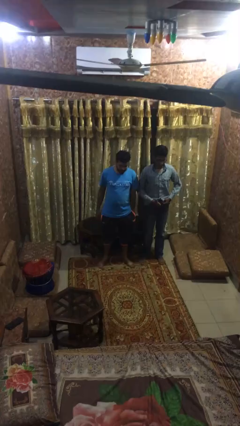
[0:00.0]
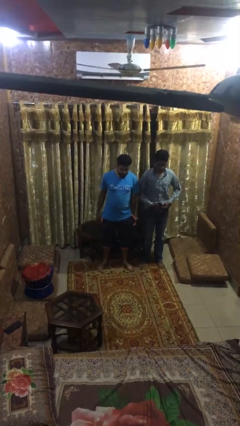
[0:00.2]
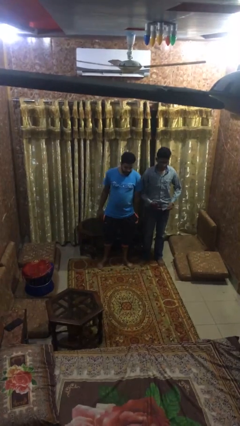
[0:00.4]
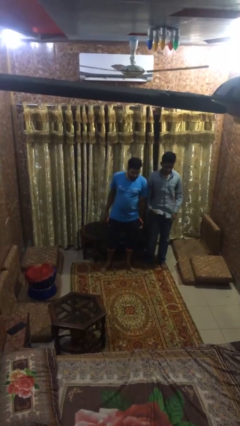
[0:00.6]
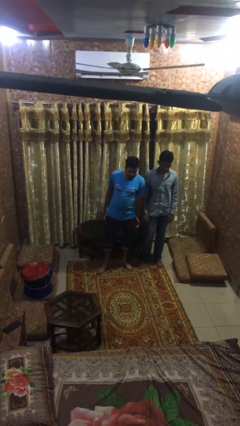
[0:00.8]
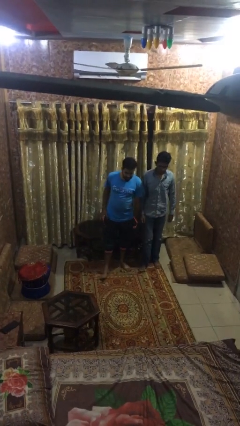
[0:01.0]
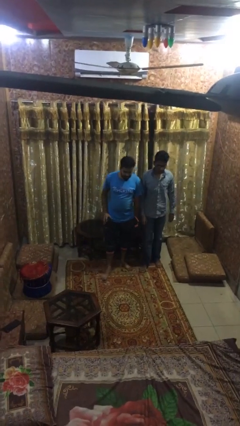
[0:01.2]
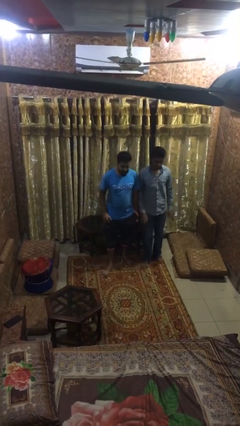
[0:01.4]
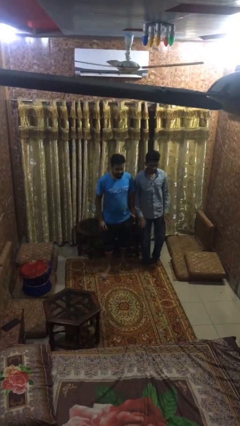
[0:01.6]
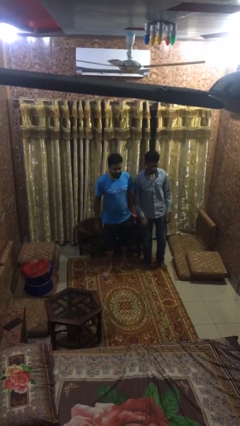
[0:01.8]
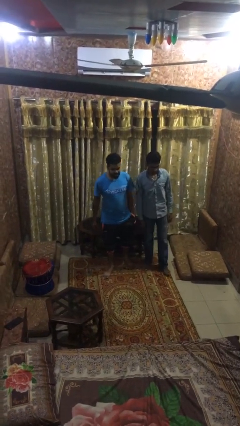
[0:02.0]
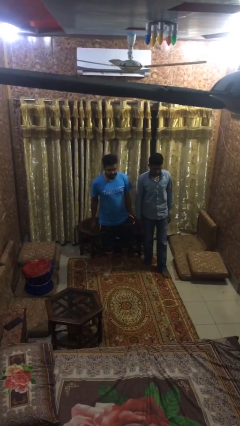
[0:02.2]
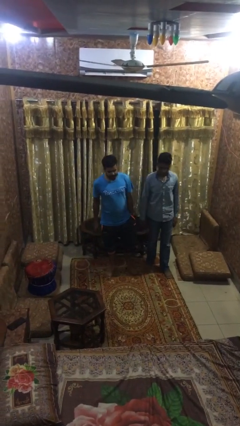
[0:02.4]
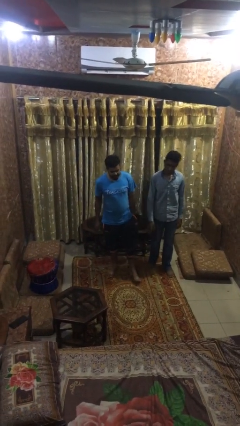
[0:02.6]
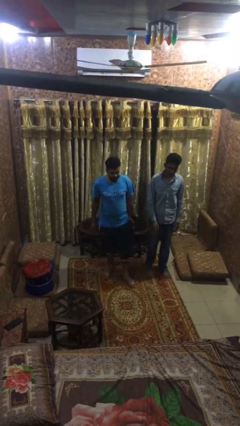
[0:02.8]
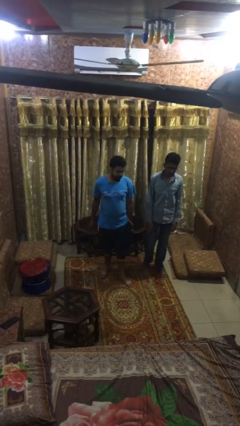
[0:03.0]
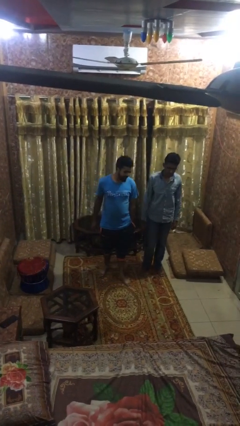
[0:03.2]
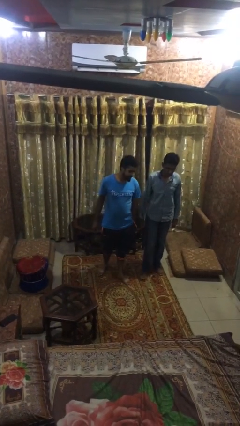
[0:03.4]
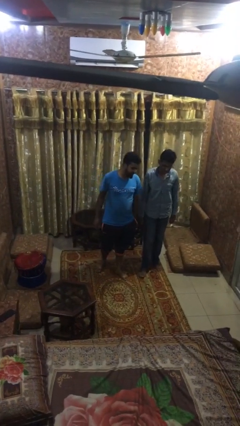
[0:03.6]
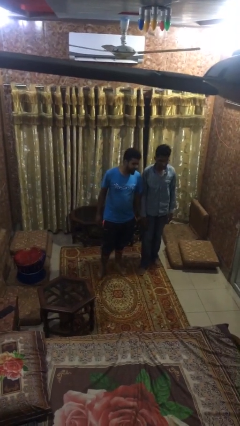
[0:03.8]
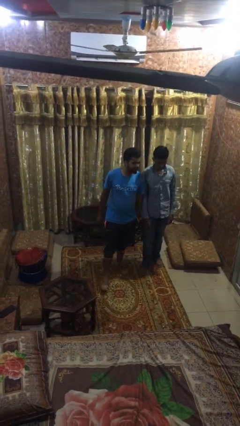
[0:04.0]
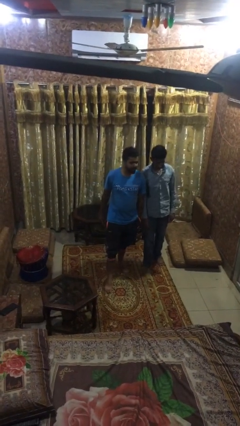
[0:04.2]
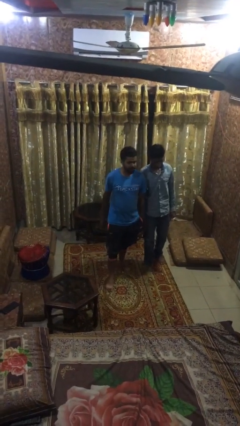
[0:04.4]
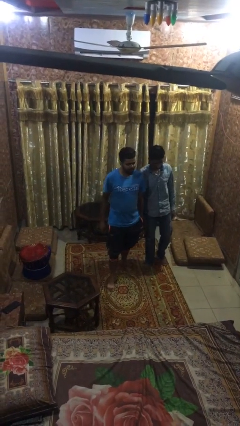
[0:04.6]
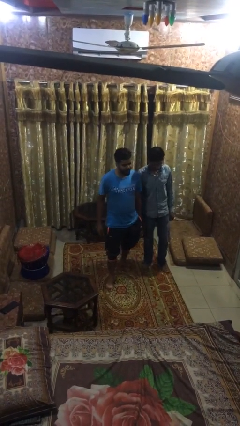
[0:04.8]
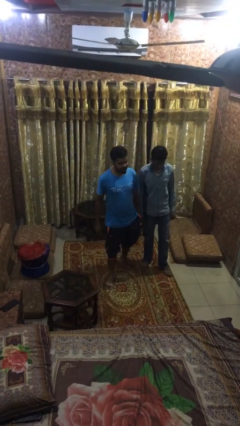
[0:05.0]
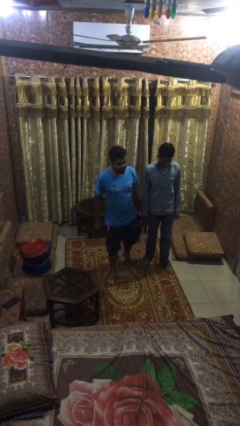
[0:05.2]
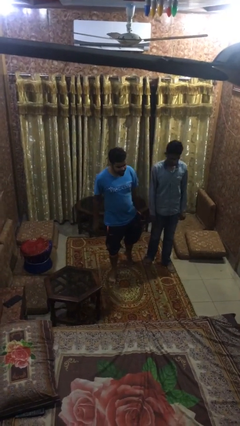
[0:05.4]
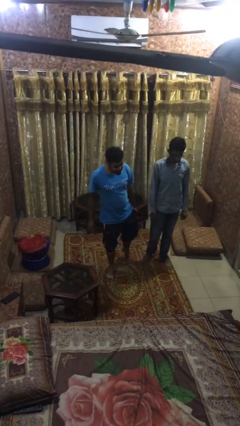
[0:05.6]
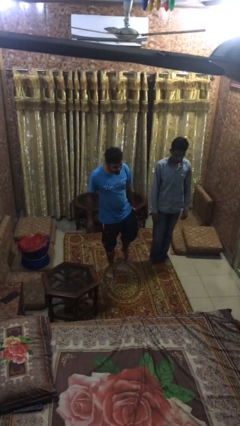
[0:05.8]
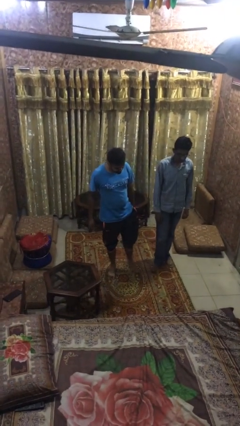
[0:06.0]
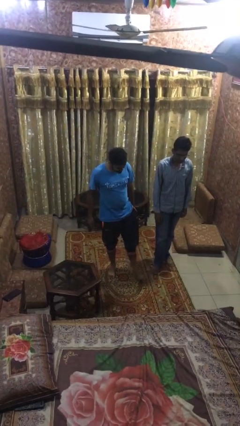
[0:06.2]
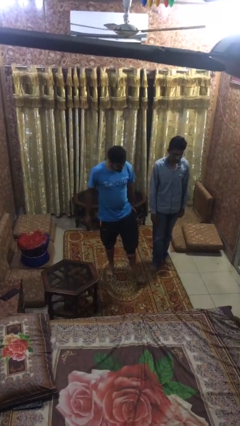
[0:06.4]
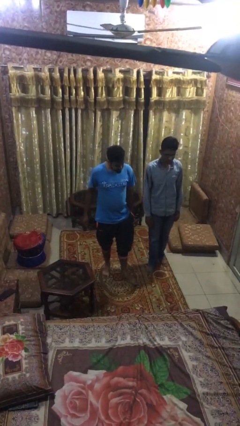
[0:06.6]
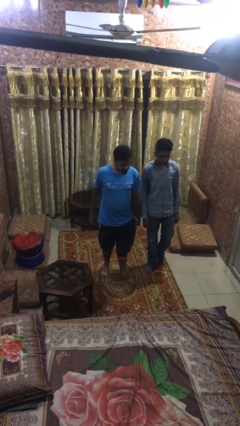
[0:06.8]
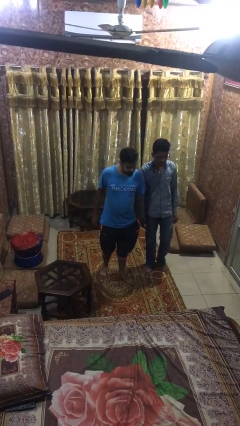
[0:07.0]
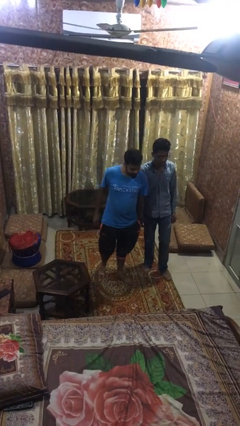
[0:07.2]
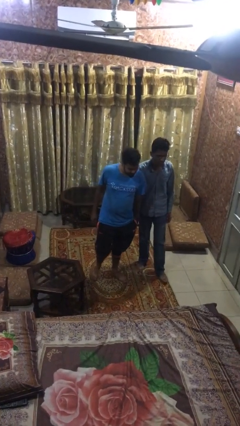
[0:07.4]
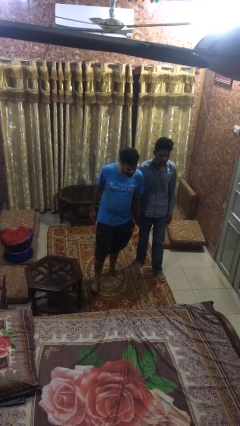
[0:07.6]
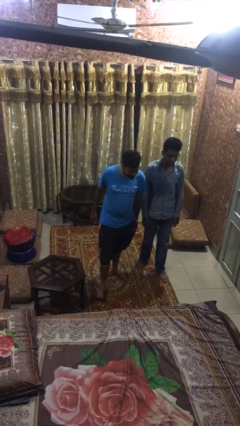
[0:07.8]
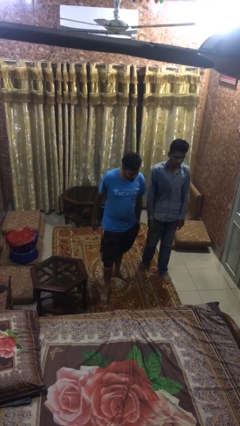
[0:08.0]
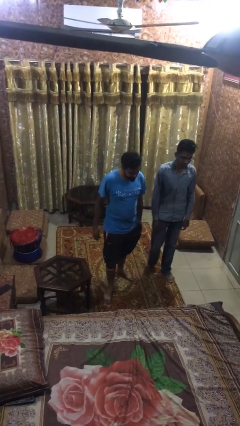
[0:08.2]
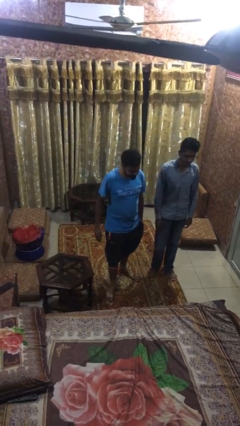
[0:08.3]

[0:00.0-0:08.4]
person talks to person

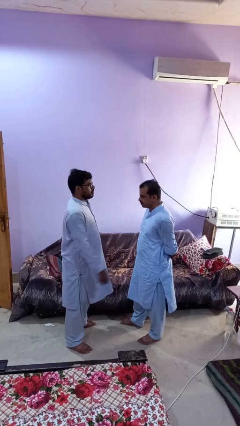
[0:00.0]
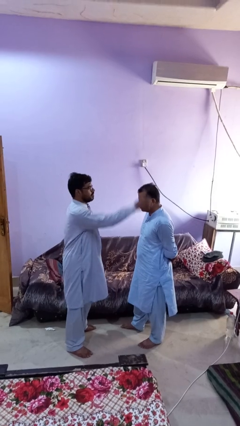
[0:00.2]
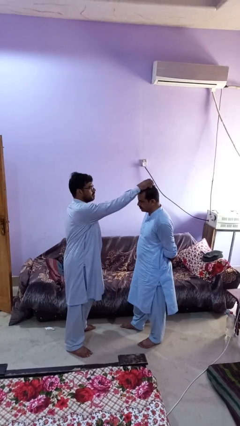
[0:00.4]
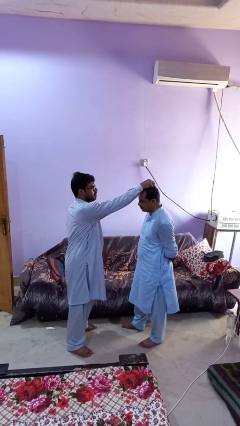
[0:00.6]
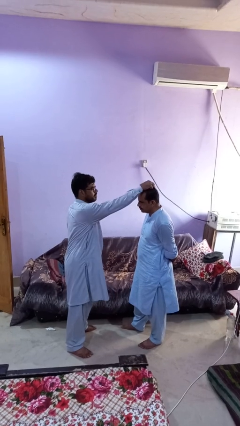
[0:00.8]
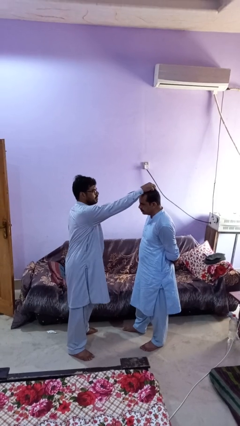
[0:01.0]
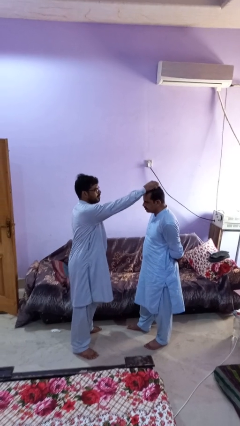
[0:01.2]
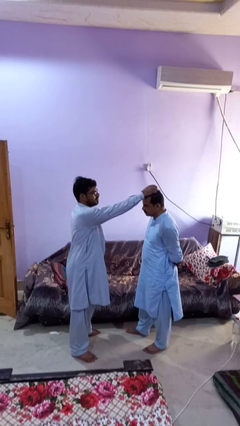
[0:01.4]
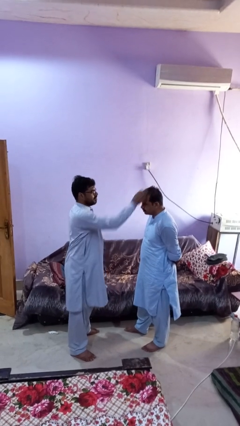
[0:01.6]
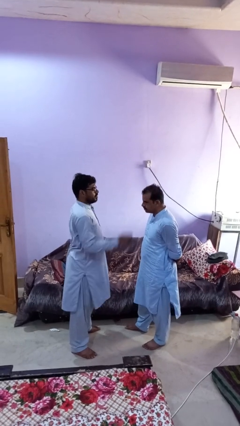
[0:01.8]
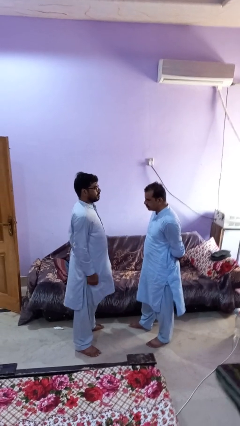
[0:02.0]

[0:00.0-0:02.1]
person grabs person by hair

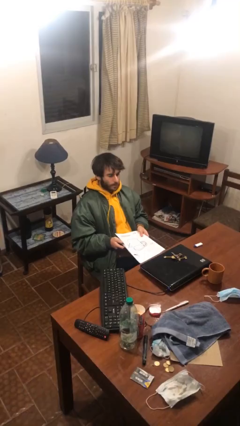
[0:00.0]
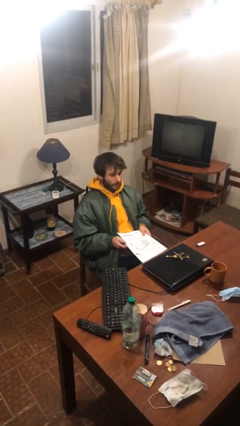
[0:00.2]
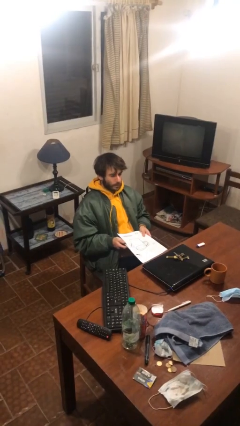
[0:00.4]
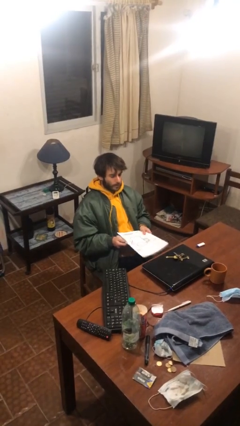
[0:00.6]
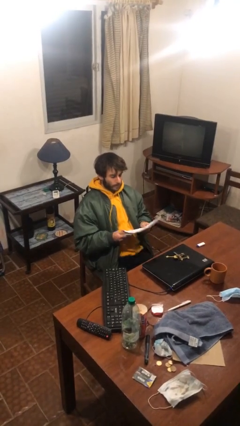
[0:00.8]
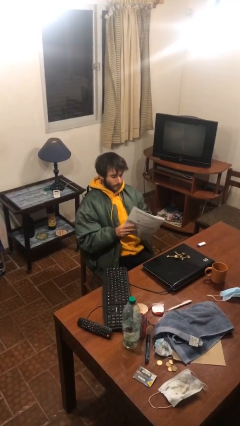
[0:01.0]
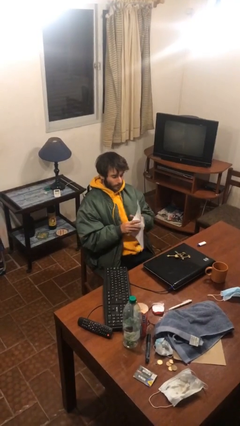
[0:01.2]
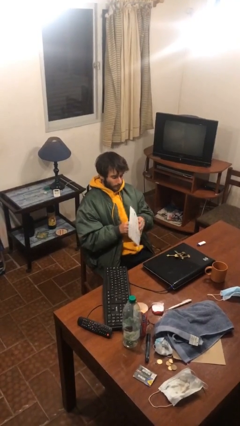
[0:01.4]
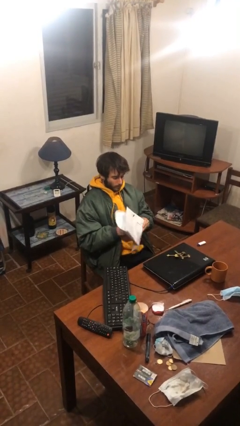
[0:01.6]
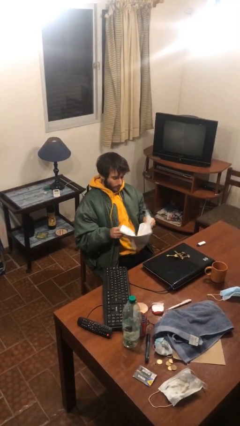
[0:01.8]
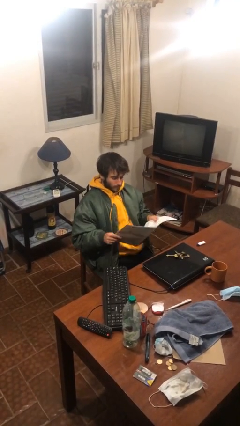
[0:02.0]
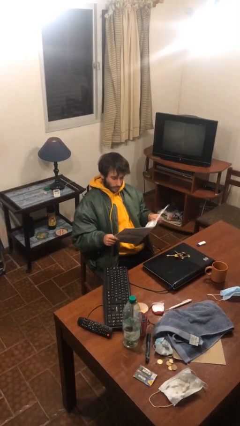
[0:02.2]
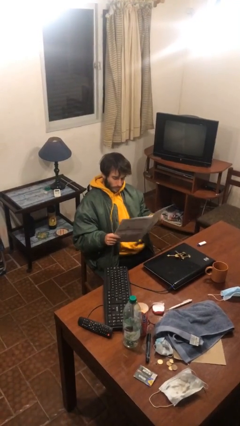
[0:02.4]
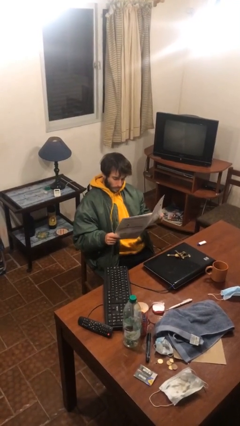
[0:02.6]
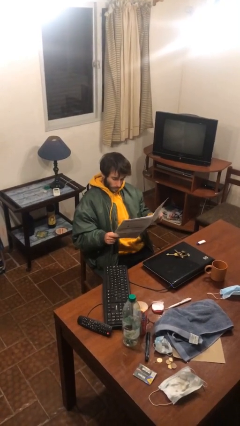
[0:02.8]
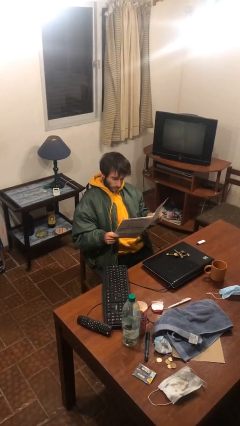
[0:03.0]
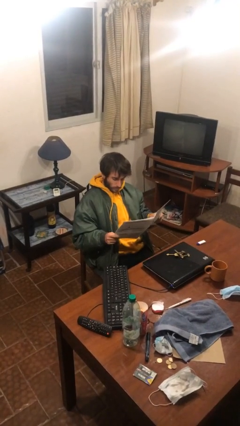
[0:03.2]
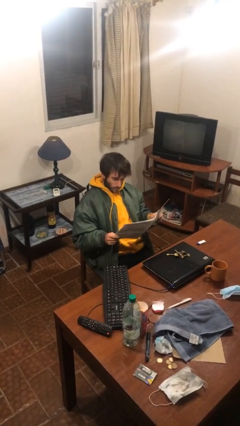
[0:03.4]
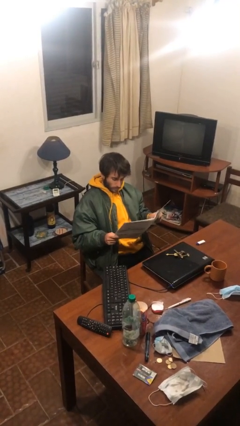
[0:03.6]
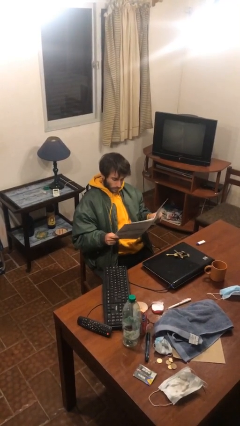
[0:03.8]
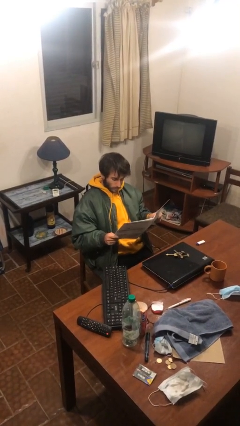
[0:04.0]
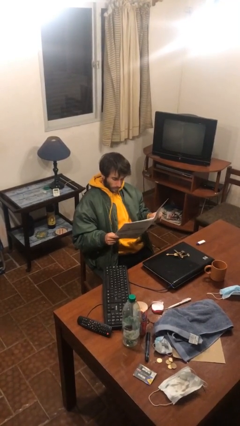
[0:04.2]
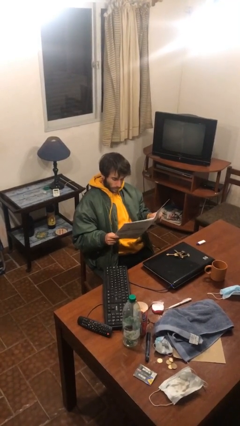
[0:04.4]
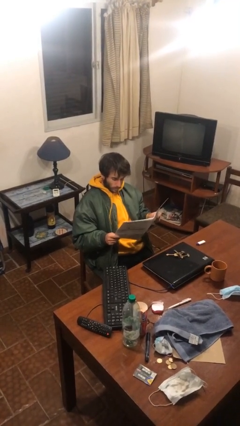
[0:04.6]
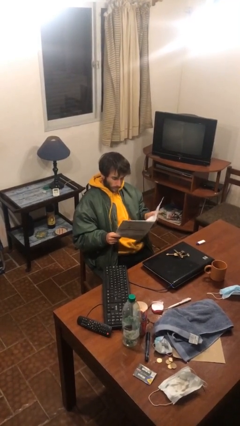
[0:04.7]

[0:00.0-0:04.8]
person reads document

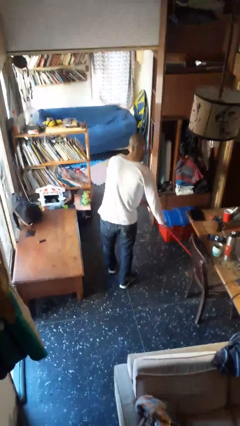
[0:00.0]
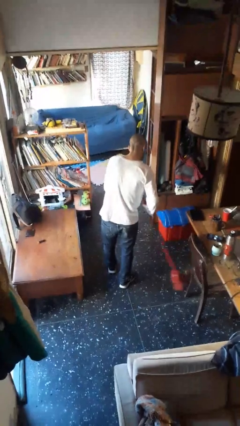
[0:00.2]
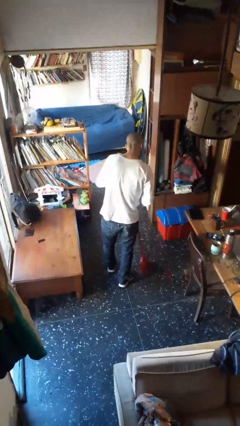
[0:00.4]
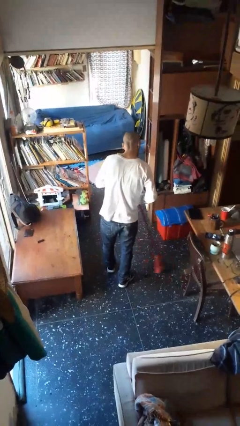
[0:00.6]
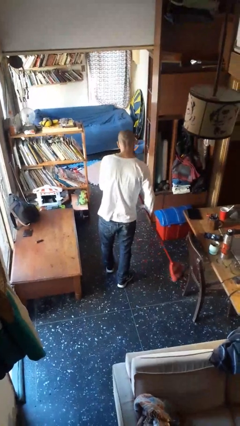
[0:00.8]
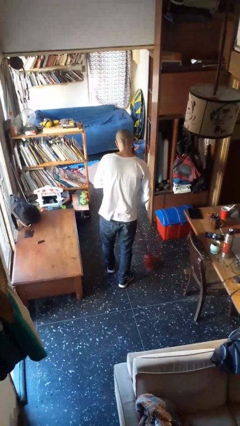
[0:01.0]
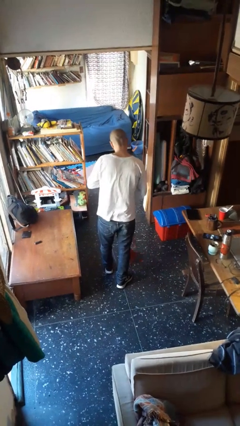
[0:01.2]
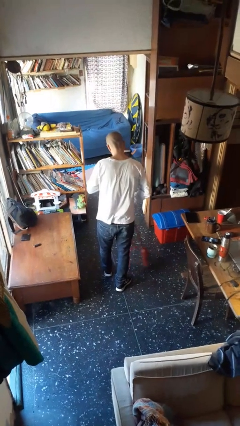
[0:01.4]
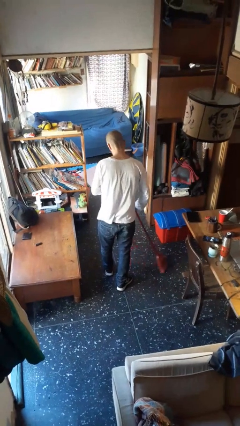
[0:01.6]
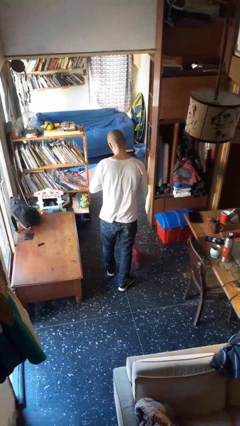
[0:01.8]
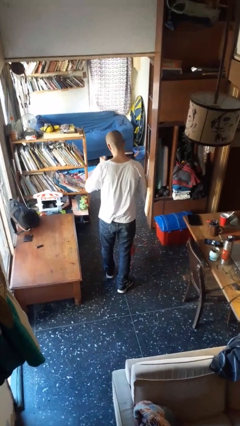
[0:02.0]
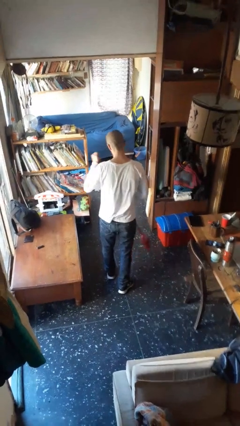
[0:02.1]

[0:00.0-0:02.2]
person sweeps floor

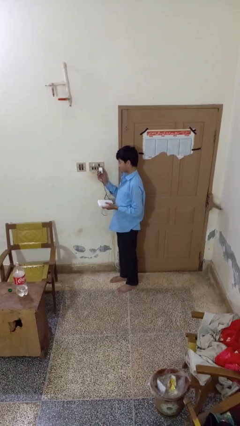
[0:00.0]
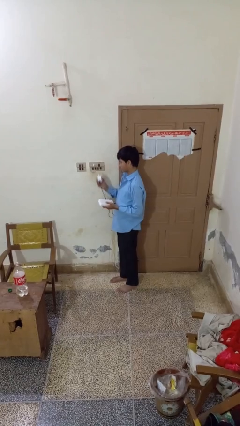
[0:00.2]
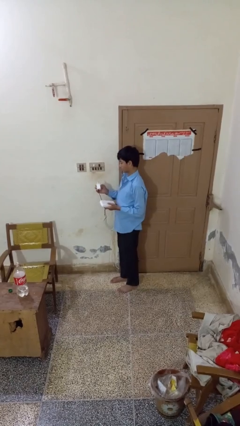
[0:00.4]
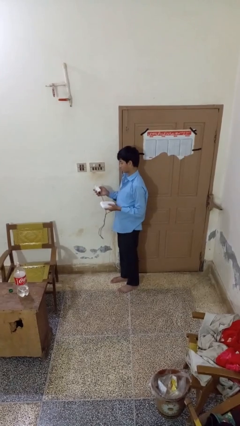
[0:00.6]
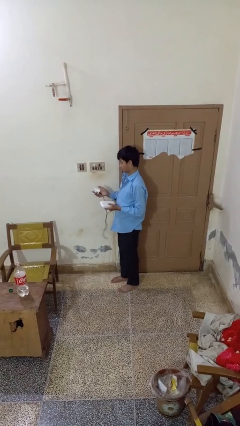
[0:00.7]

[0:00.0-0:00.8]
person unplugs from electrical socket
